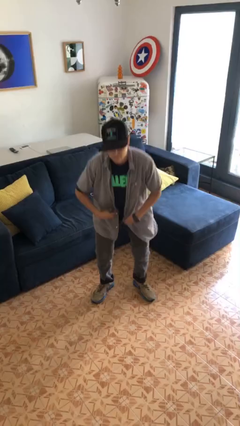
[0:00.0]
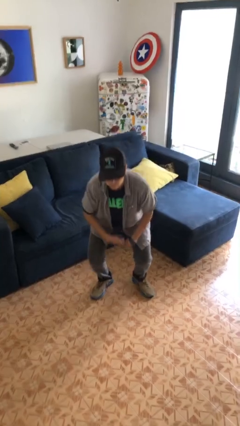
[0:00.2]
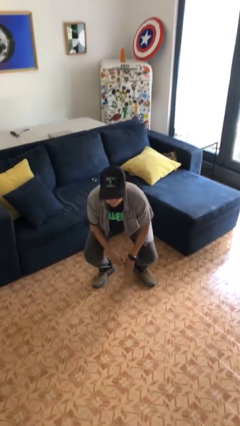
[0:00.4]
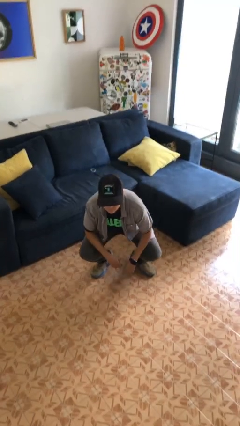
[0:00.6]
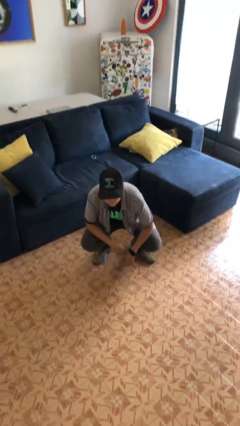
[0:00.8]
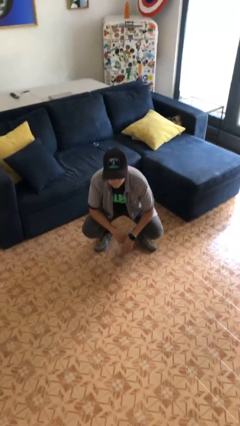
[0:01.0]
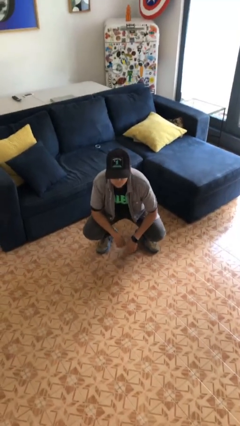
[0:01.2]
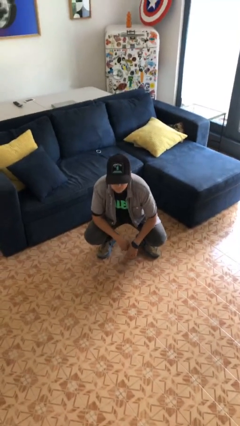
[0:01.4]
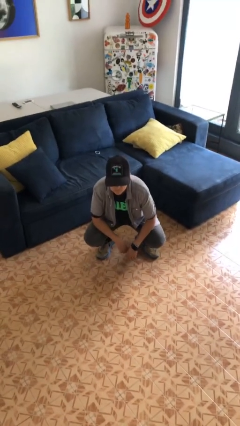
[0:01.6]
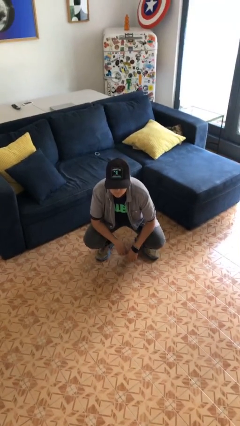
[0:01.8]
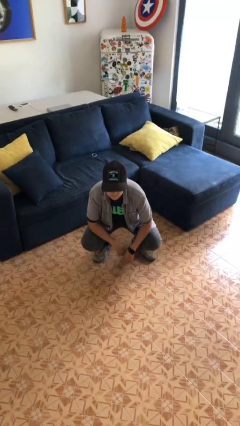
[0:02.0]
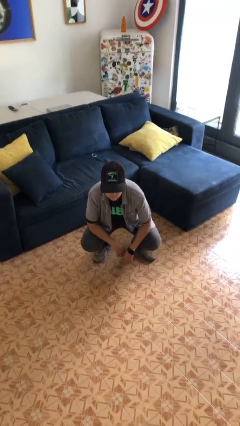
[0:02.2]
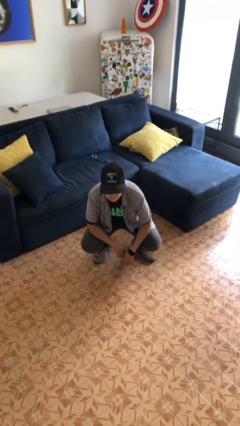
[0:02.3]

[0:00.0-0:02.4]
person squats

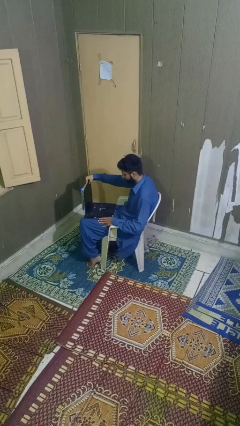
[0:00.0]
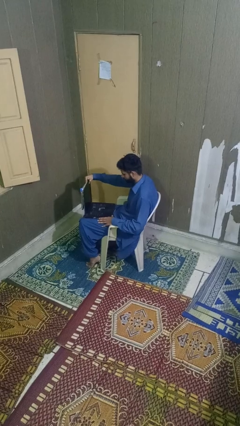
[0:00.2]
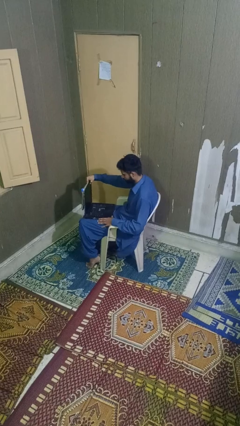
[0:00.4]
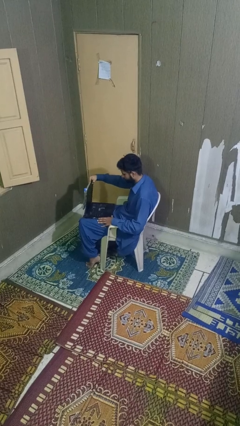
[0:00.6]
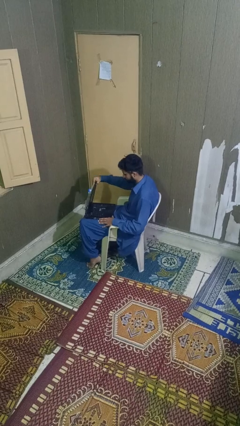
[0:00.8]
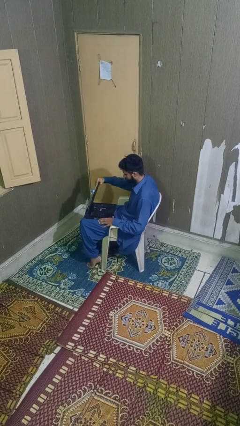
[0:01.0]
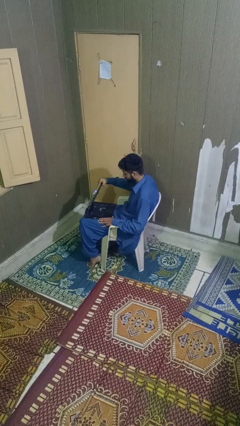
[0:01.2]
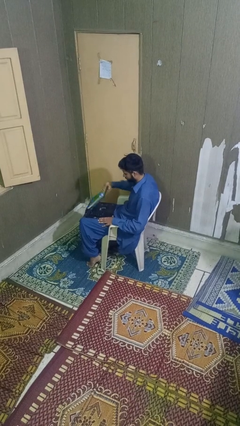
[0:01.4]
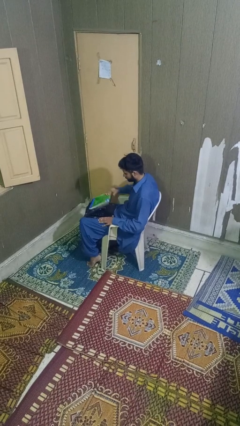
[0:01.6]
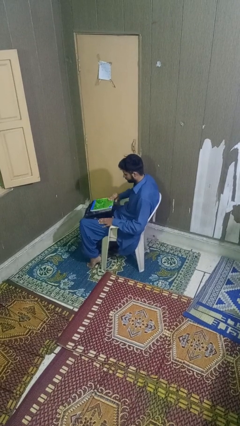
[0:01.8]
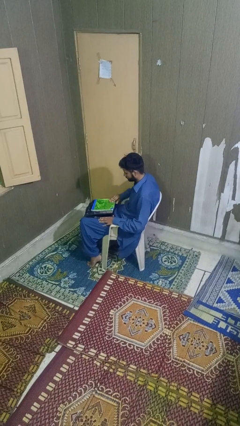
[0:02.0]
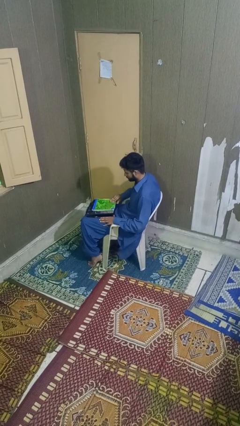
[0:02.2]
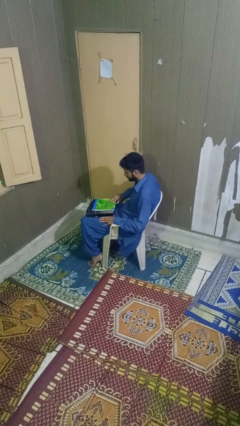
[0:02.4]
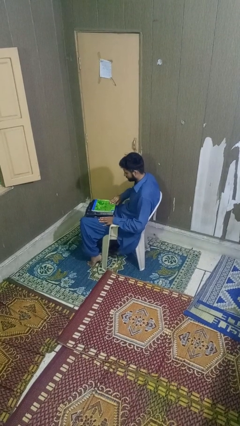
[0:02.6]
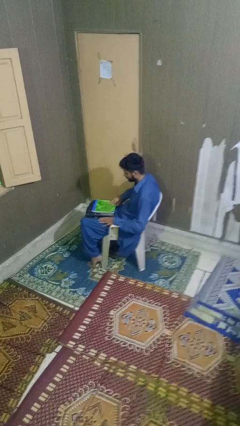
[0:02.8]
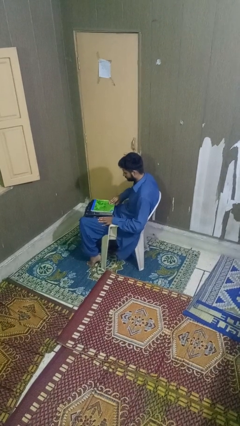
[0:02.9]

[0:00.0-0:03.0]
person closes laptop

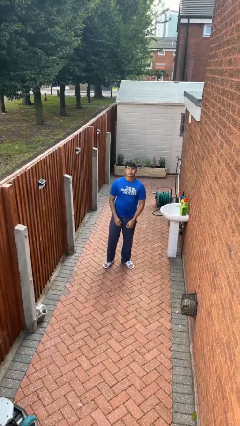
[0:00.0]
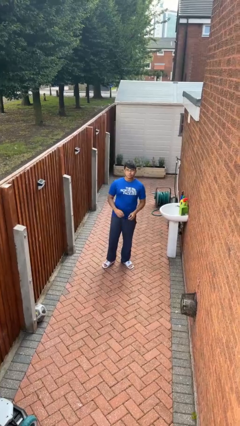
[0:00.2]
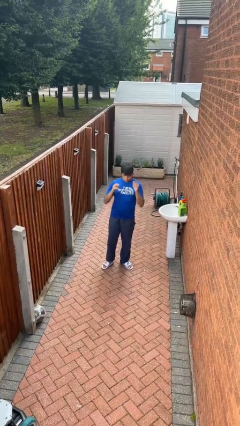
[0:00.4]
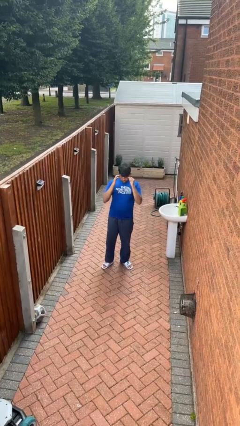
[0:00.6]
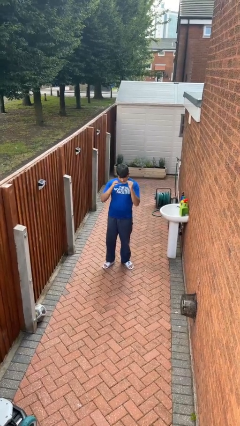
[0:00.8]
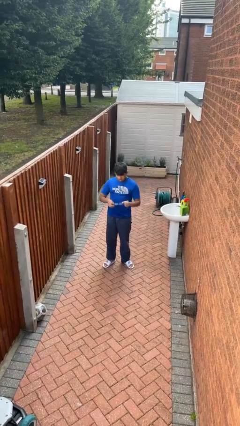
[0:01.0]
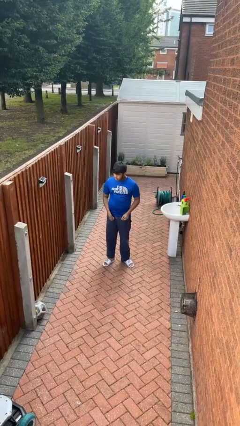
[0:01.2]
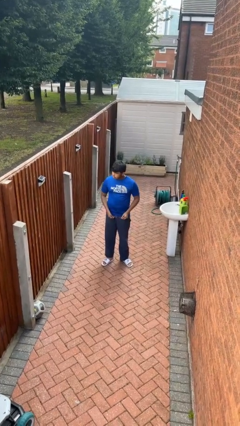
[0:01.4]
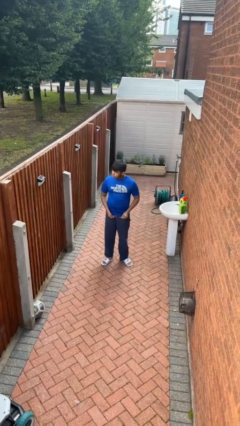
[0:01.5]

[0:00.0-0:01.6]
person takes off glasses

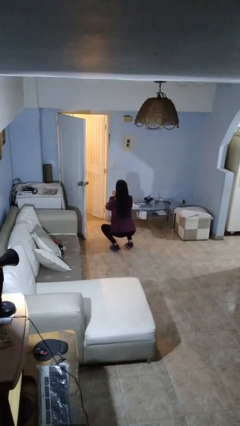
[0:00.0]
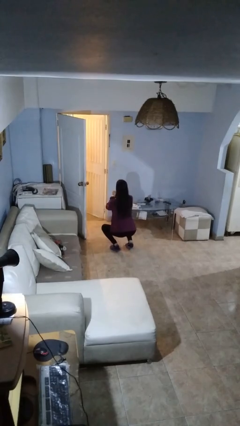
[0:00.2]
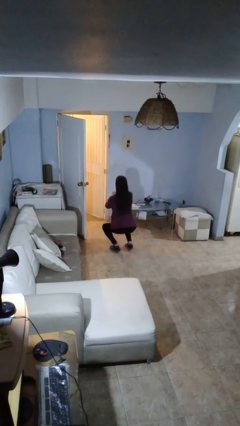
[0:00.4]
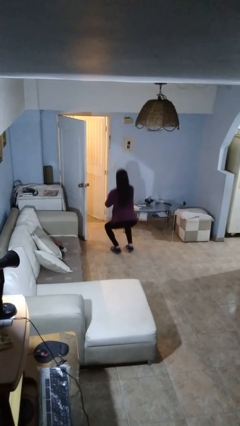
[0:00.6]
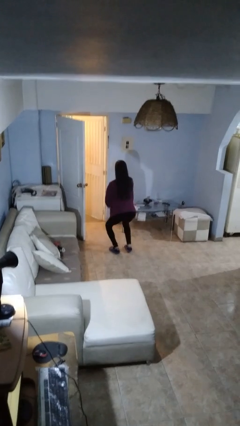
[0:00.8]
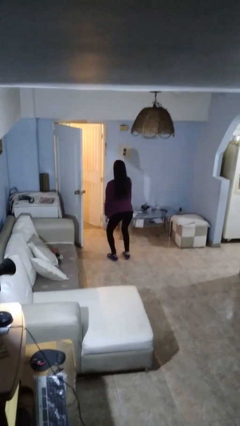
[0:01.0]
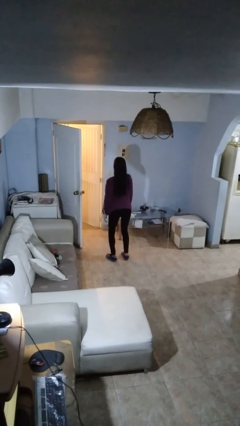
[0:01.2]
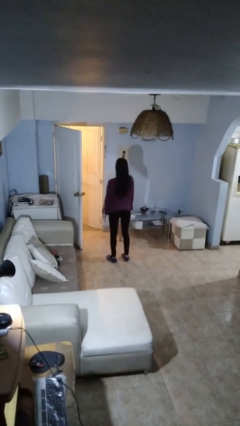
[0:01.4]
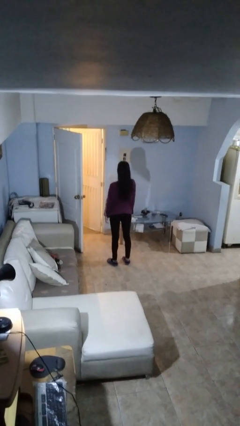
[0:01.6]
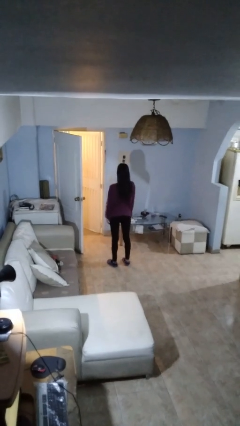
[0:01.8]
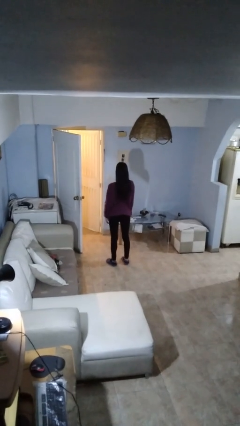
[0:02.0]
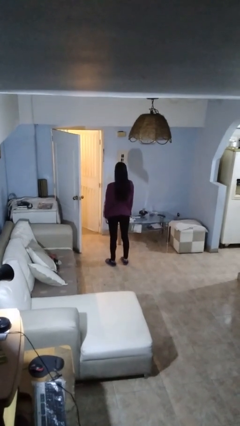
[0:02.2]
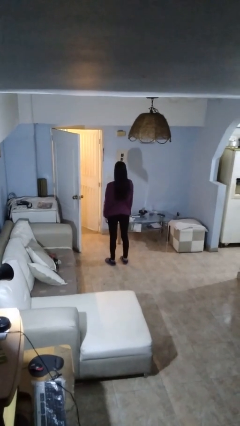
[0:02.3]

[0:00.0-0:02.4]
person stands up

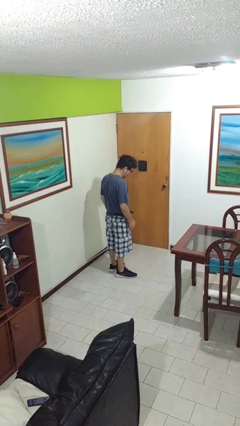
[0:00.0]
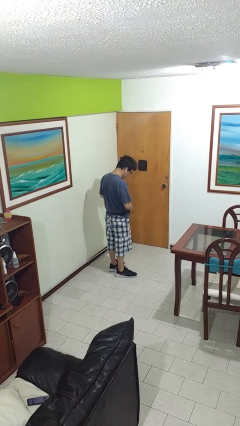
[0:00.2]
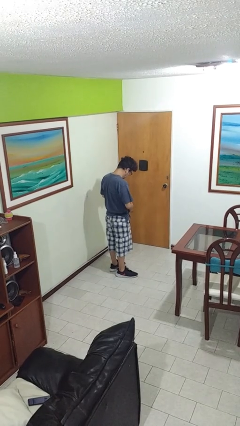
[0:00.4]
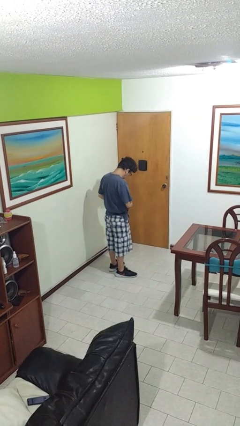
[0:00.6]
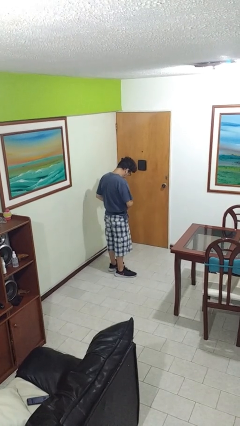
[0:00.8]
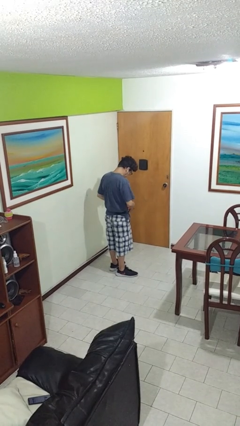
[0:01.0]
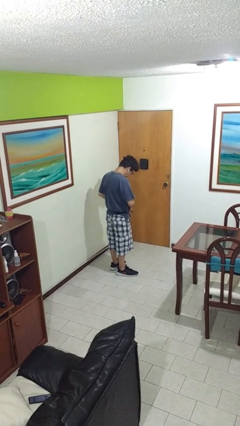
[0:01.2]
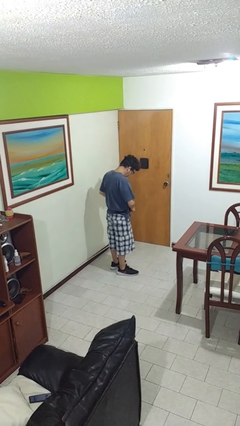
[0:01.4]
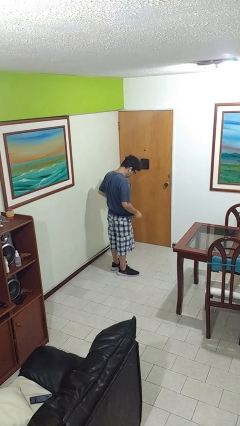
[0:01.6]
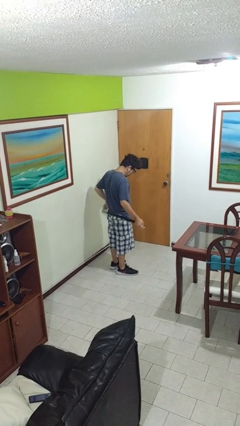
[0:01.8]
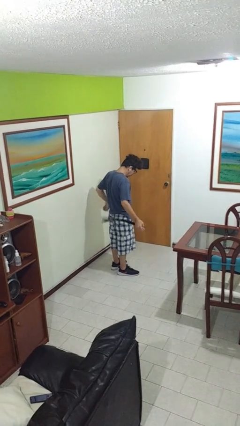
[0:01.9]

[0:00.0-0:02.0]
person takes off belt

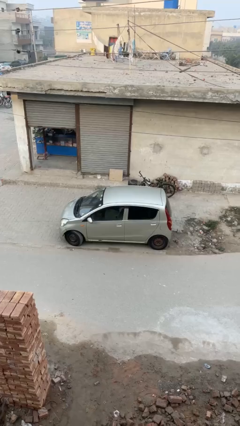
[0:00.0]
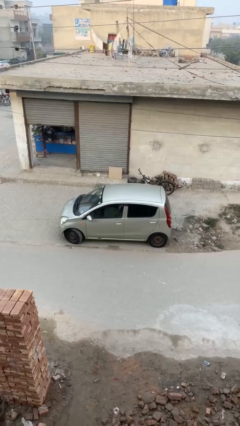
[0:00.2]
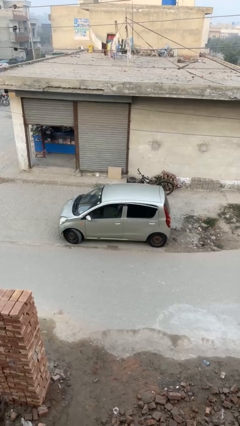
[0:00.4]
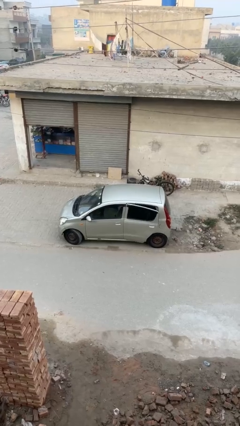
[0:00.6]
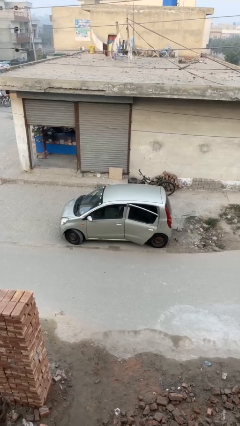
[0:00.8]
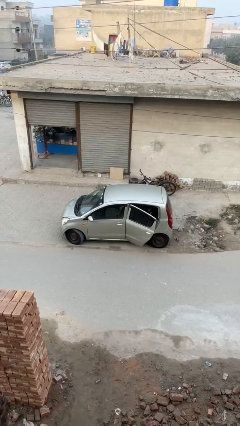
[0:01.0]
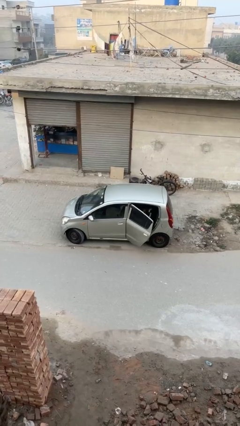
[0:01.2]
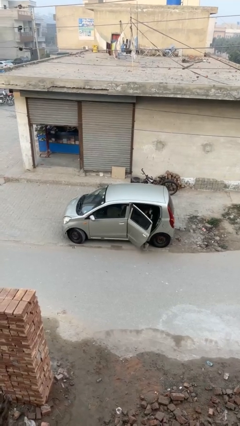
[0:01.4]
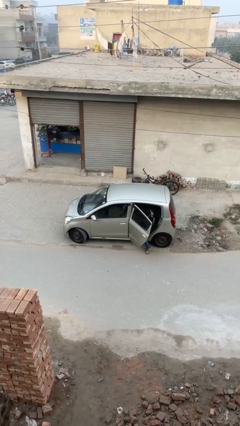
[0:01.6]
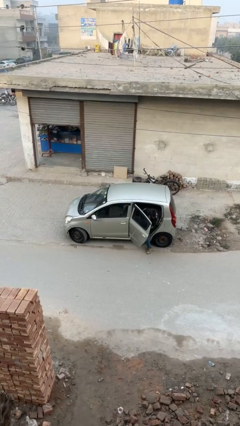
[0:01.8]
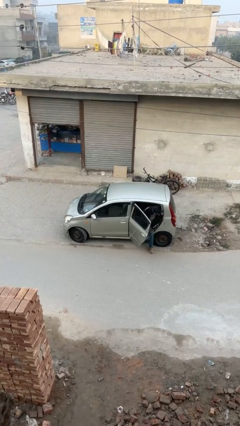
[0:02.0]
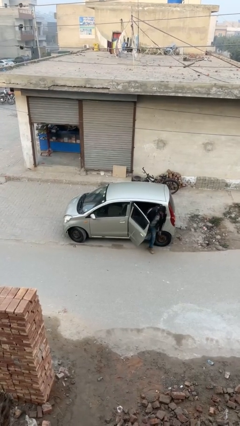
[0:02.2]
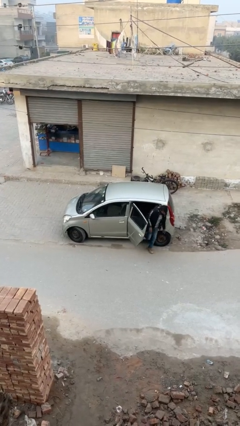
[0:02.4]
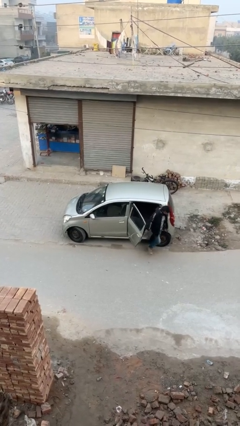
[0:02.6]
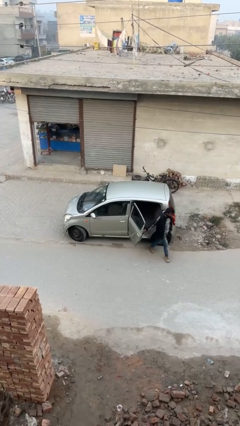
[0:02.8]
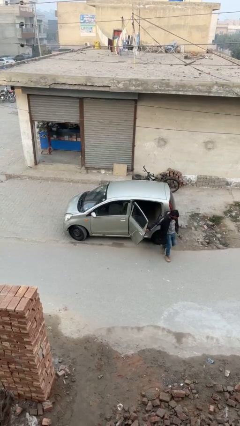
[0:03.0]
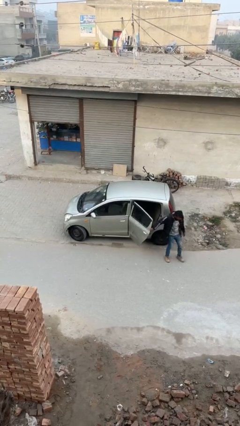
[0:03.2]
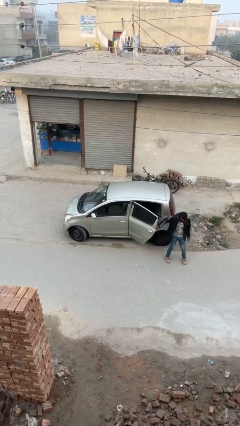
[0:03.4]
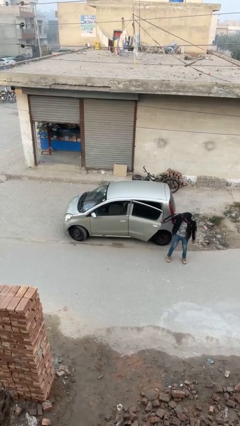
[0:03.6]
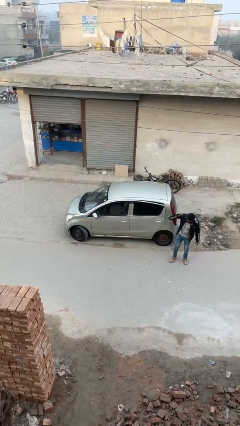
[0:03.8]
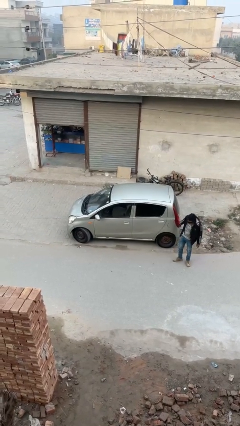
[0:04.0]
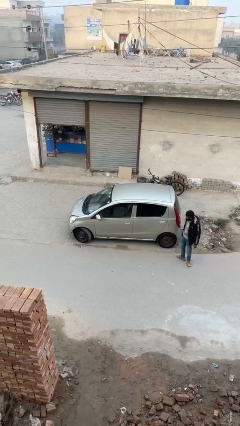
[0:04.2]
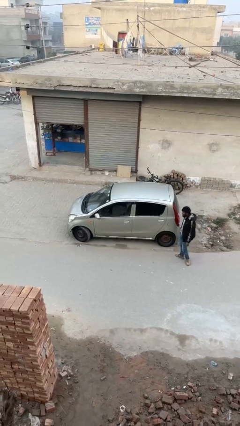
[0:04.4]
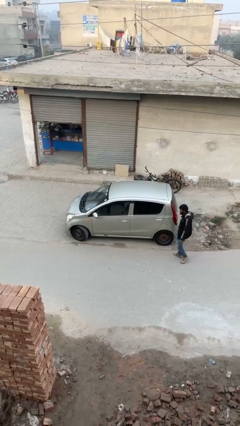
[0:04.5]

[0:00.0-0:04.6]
car drops off person

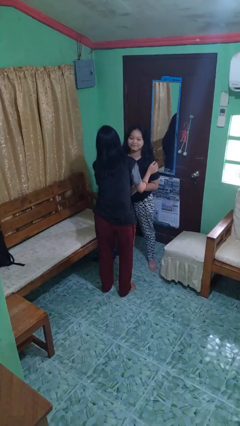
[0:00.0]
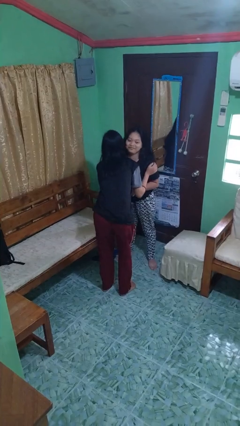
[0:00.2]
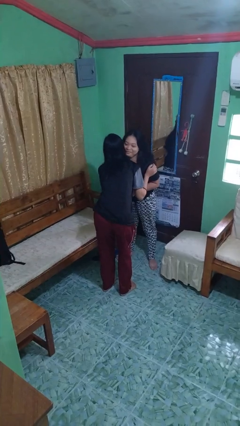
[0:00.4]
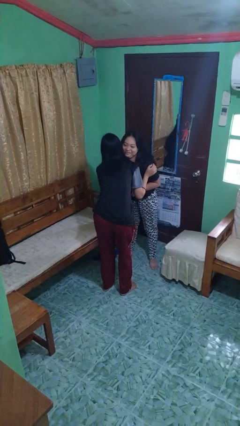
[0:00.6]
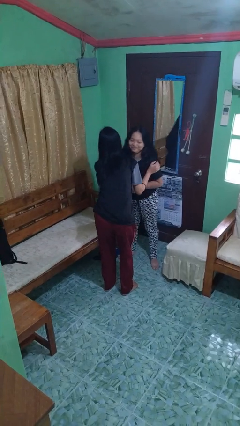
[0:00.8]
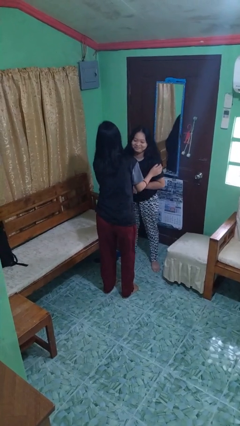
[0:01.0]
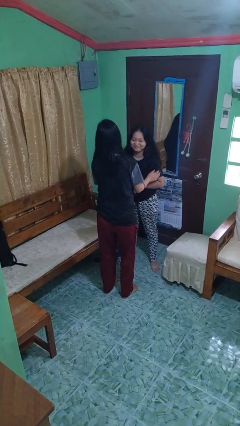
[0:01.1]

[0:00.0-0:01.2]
person kisses cheek of person
